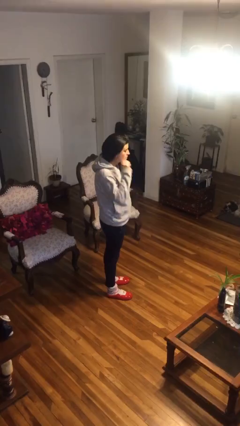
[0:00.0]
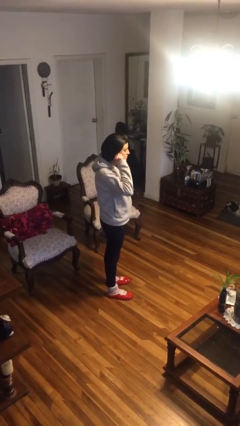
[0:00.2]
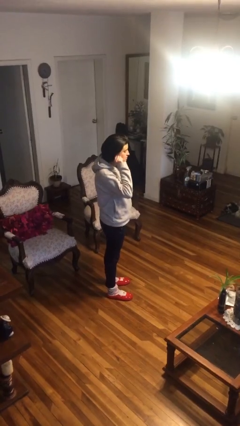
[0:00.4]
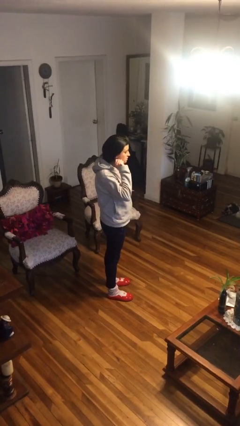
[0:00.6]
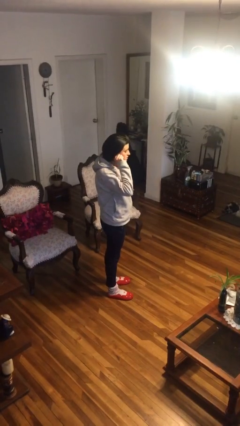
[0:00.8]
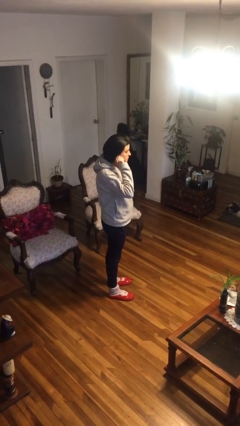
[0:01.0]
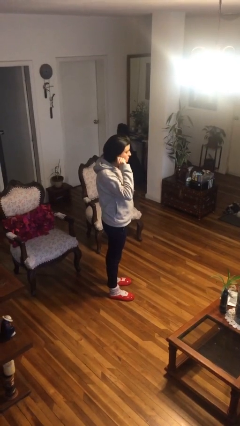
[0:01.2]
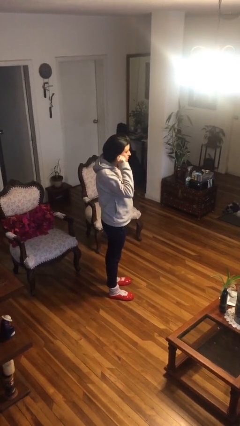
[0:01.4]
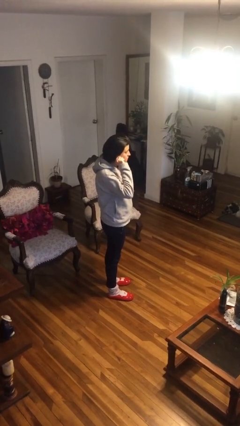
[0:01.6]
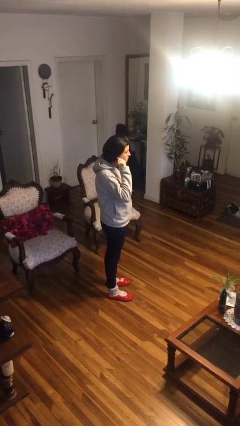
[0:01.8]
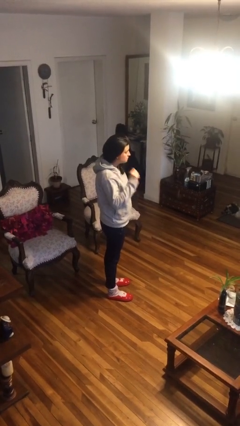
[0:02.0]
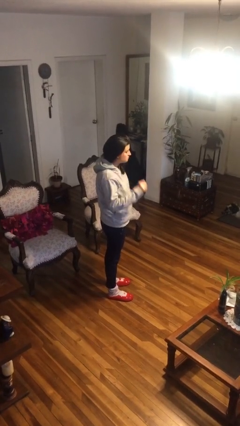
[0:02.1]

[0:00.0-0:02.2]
person touches earlobe

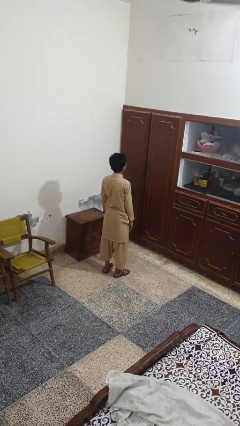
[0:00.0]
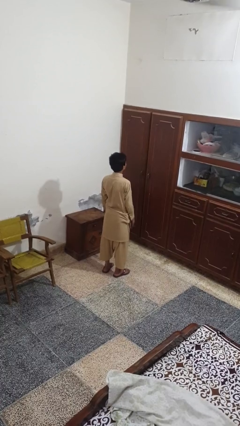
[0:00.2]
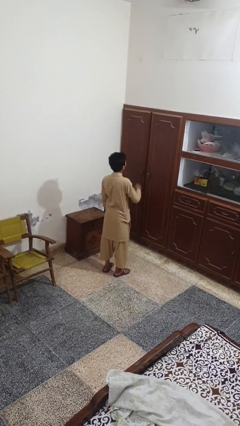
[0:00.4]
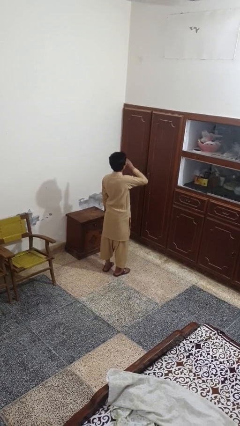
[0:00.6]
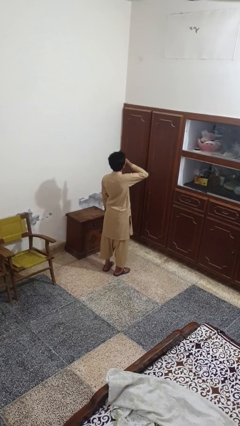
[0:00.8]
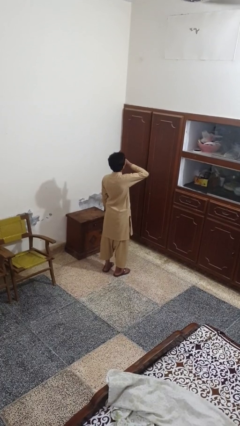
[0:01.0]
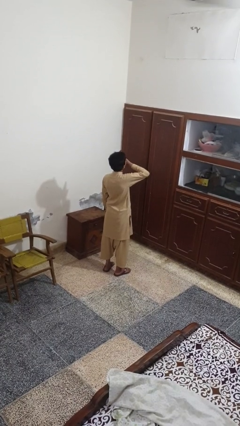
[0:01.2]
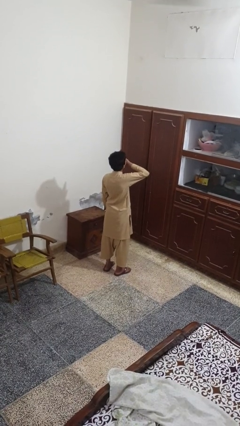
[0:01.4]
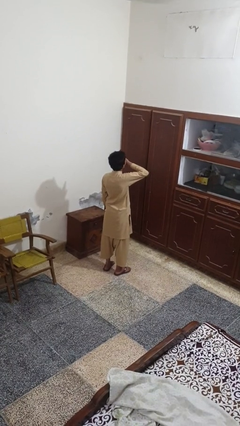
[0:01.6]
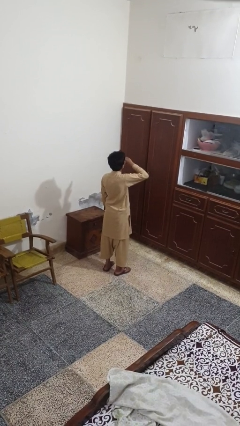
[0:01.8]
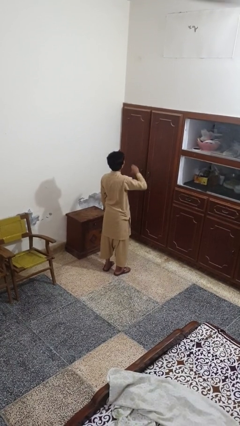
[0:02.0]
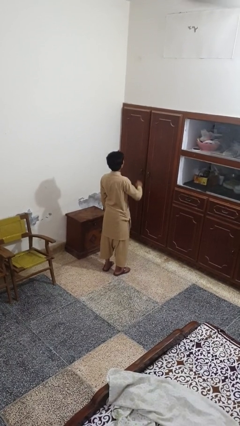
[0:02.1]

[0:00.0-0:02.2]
person yawns

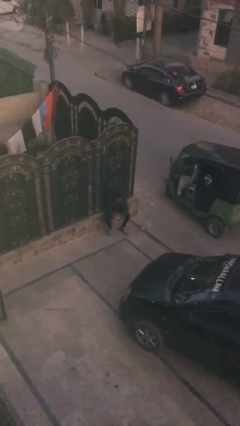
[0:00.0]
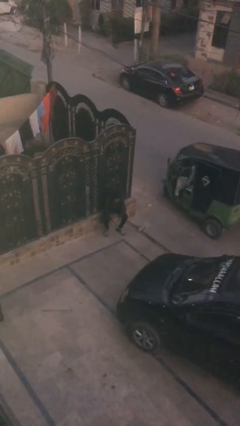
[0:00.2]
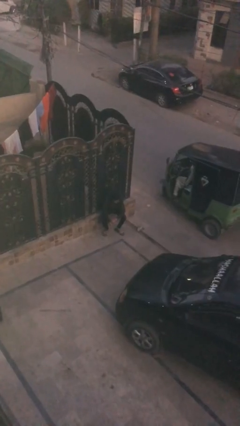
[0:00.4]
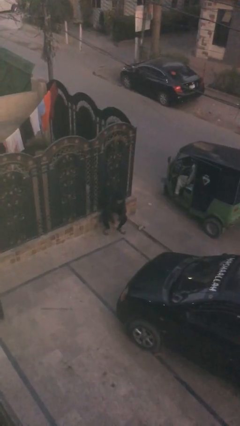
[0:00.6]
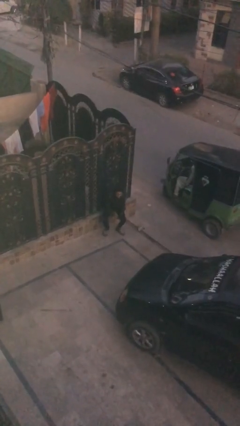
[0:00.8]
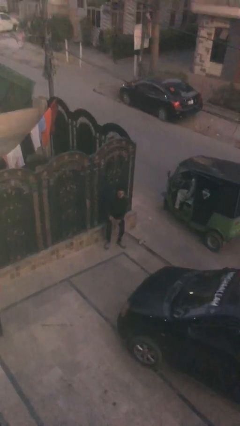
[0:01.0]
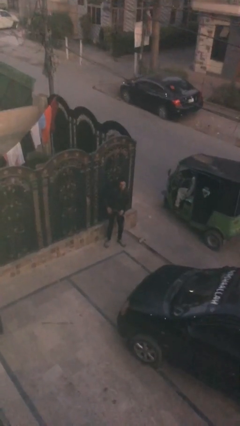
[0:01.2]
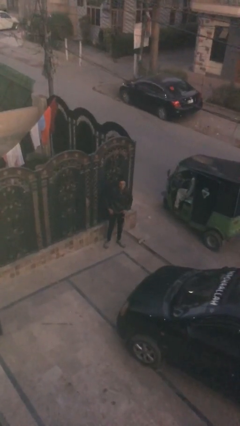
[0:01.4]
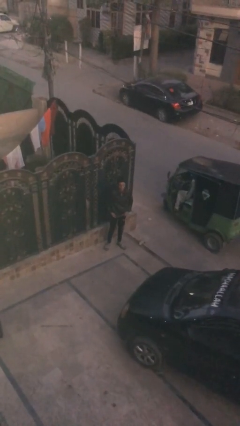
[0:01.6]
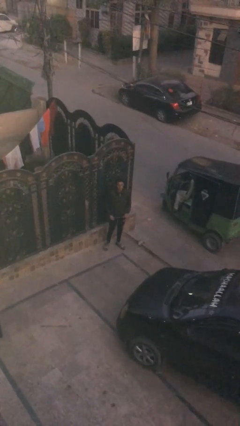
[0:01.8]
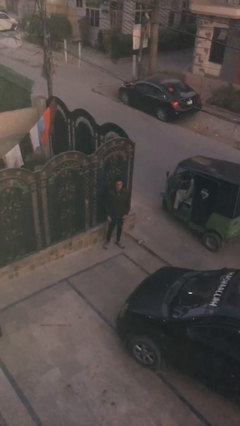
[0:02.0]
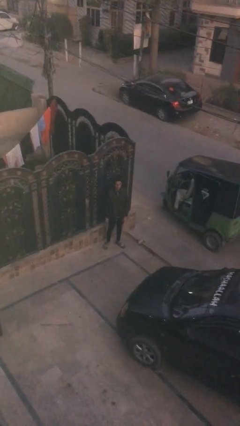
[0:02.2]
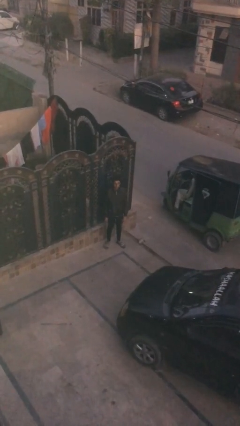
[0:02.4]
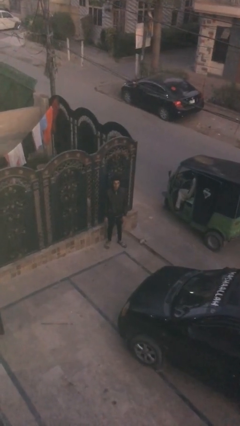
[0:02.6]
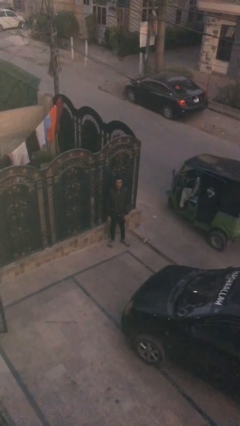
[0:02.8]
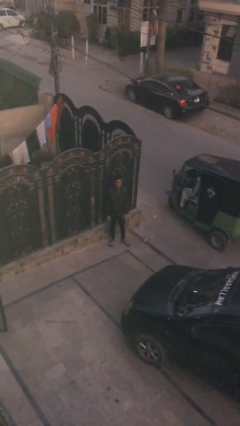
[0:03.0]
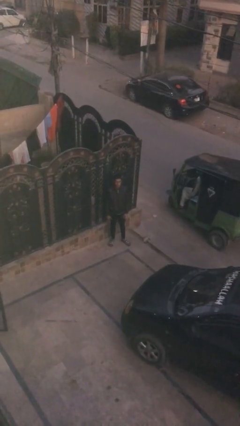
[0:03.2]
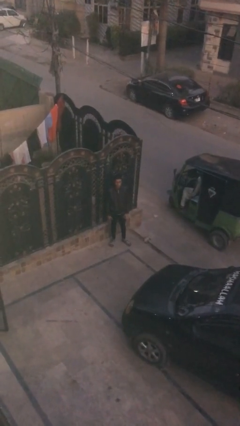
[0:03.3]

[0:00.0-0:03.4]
person stands up

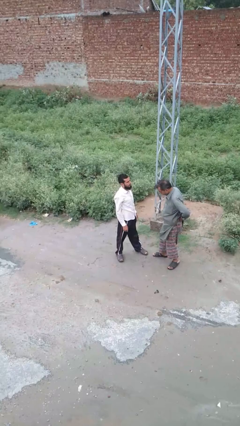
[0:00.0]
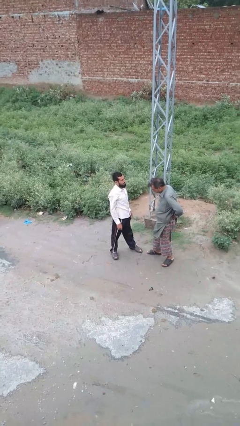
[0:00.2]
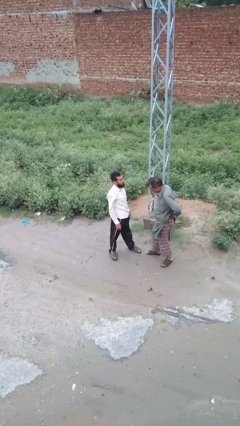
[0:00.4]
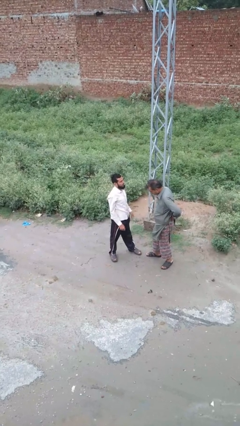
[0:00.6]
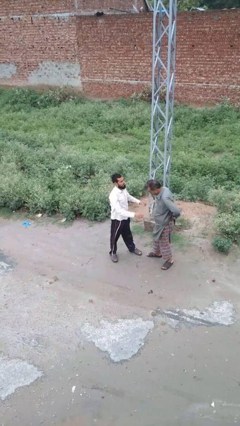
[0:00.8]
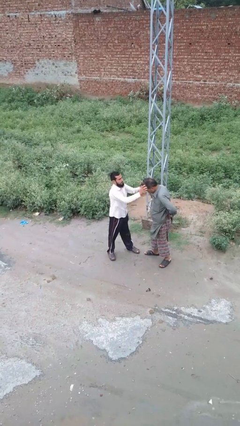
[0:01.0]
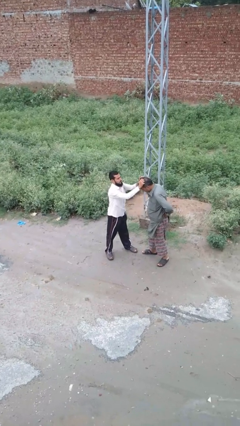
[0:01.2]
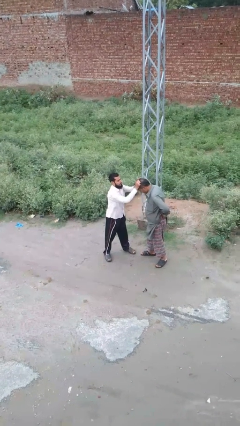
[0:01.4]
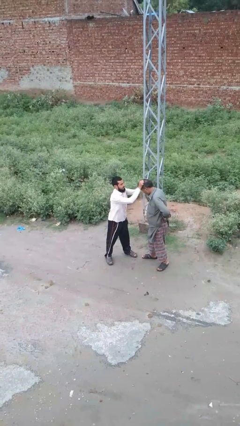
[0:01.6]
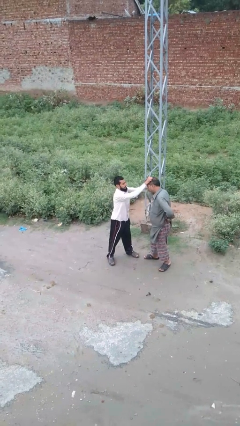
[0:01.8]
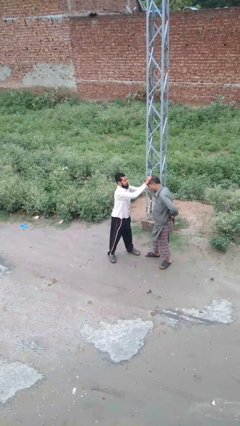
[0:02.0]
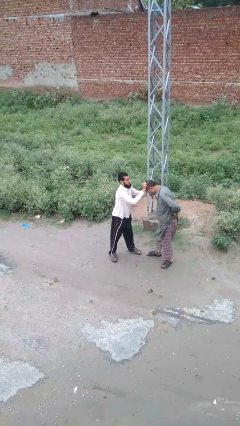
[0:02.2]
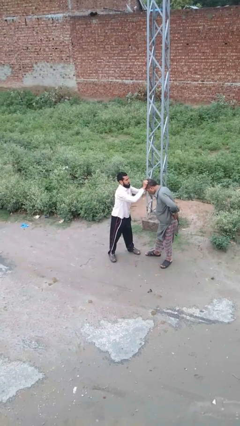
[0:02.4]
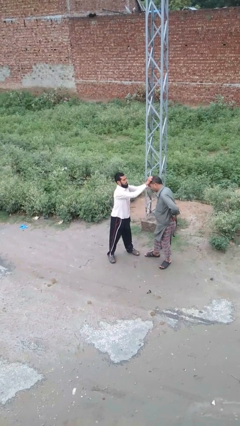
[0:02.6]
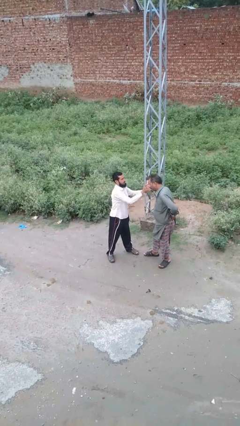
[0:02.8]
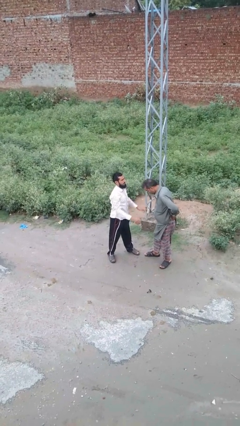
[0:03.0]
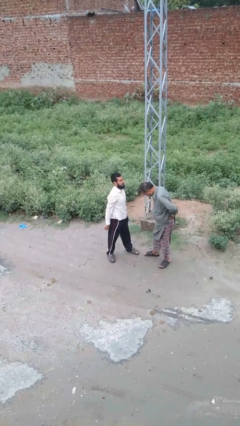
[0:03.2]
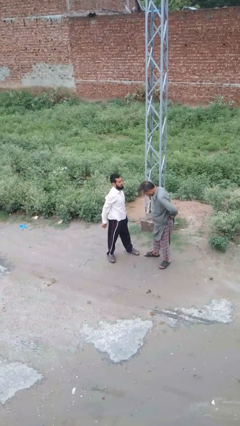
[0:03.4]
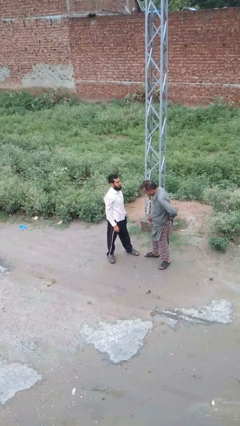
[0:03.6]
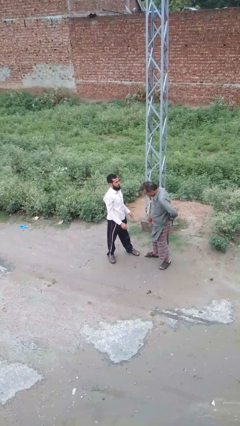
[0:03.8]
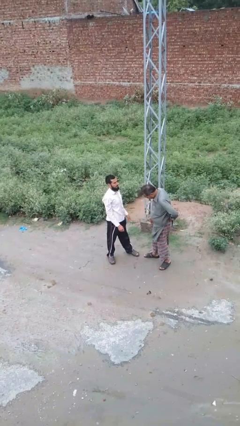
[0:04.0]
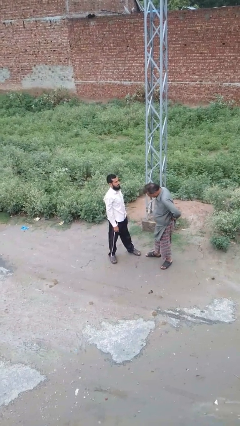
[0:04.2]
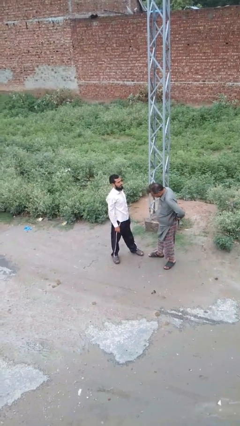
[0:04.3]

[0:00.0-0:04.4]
person grabs person by hair

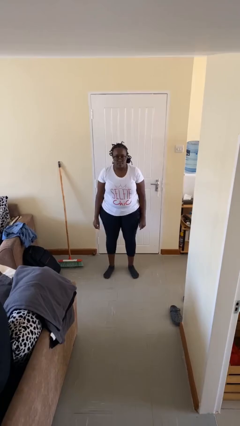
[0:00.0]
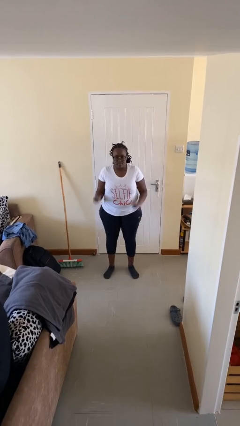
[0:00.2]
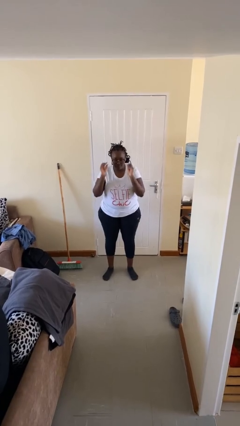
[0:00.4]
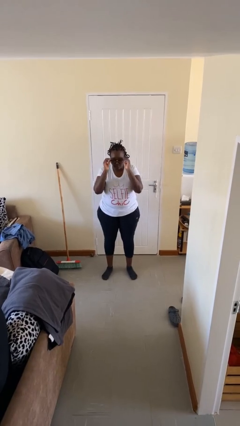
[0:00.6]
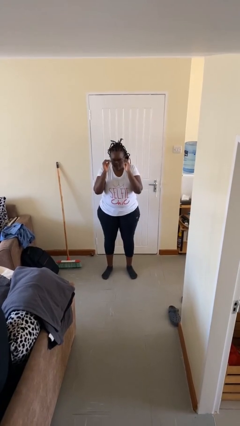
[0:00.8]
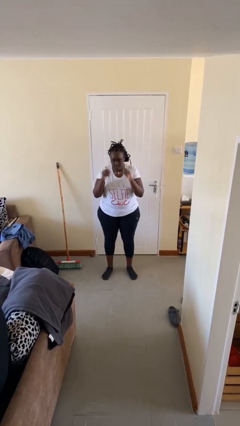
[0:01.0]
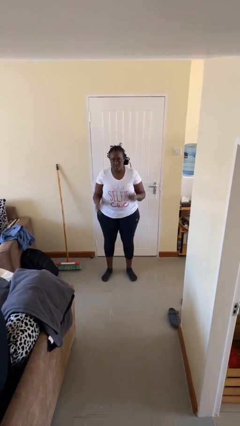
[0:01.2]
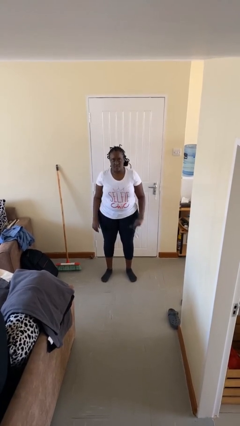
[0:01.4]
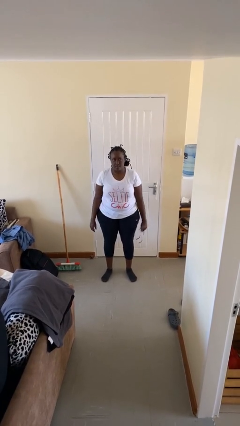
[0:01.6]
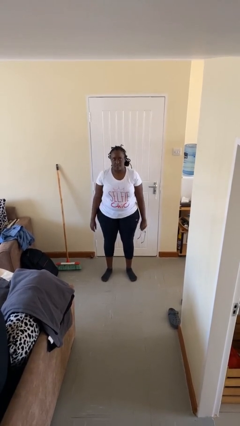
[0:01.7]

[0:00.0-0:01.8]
person takes off glasses

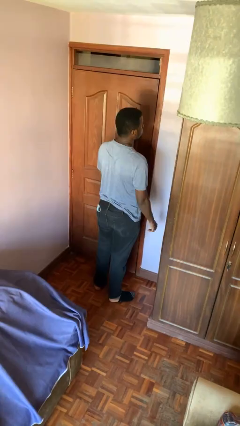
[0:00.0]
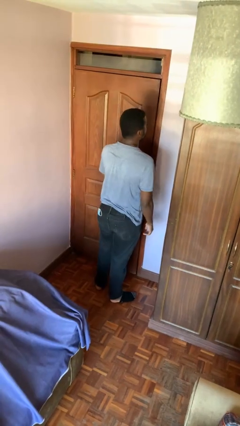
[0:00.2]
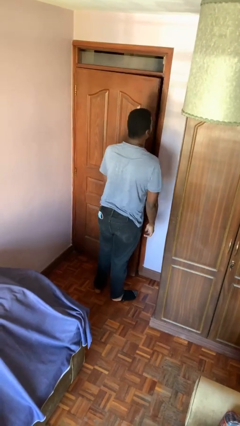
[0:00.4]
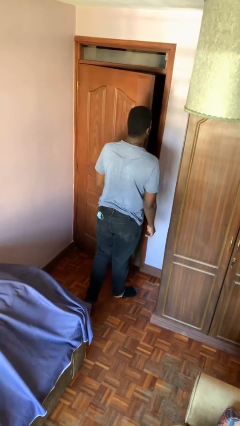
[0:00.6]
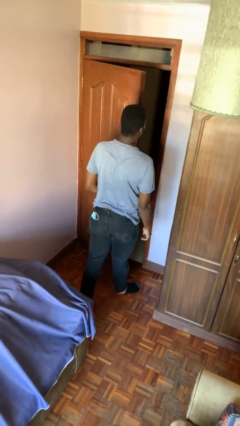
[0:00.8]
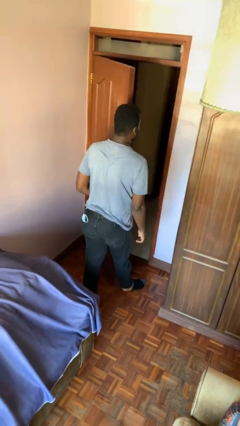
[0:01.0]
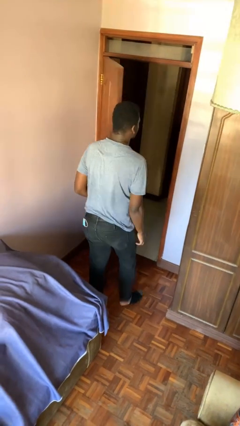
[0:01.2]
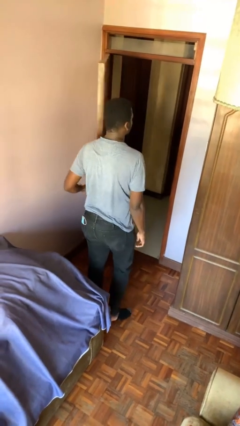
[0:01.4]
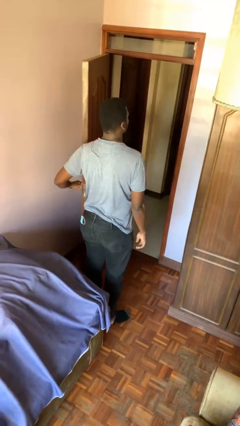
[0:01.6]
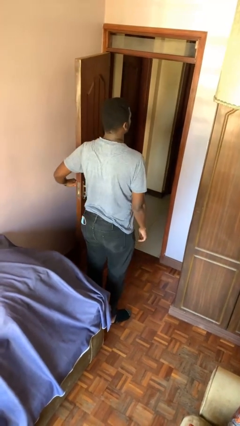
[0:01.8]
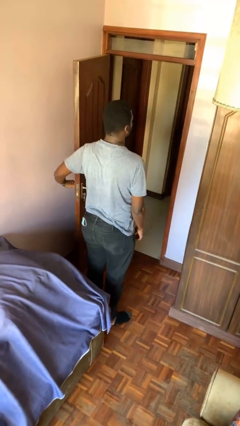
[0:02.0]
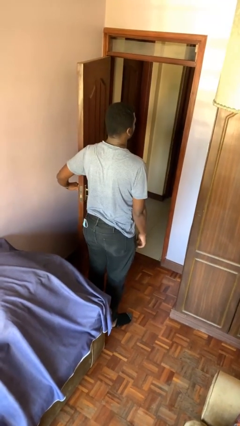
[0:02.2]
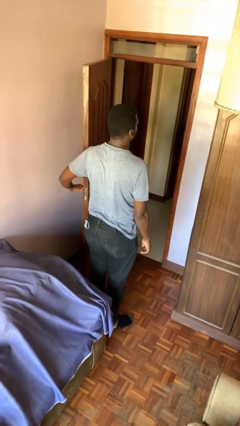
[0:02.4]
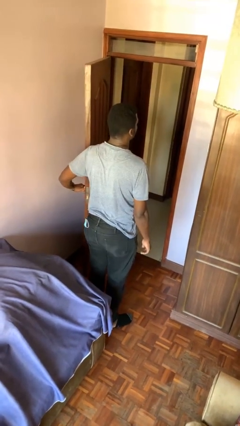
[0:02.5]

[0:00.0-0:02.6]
person opens facility door
